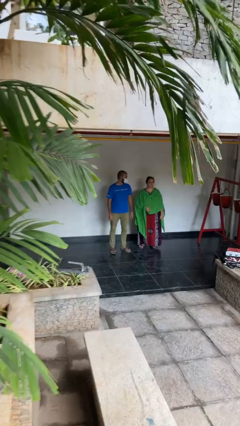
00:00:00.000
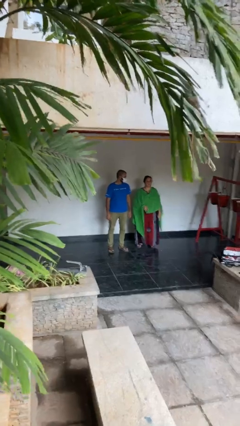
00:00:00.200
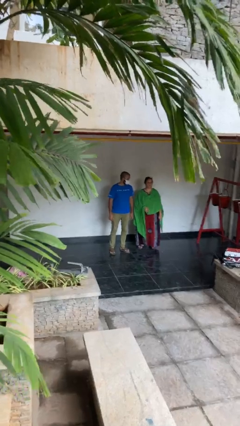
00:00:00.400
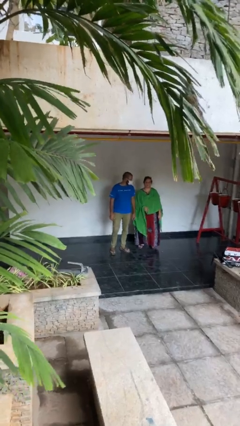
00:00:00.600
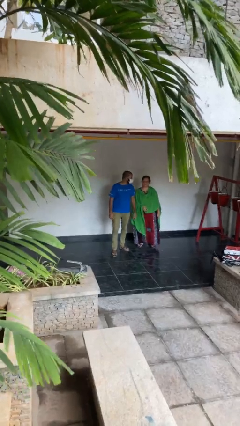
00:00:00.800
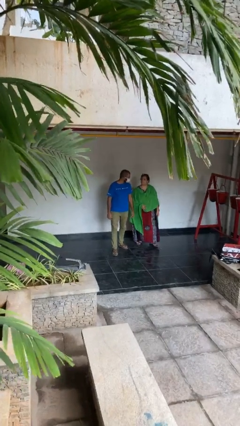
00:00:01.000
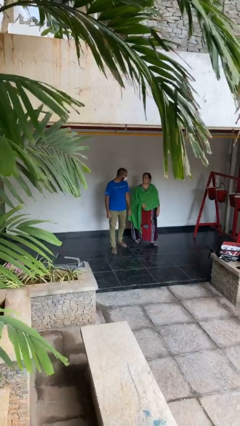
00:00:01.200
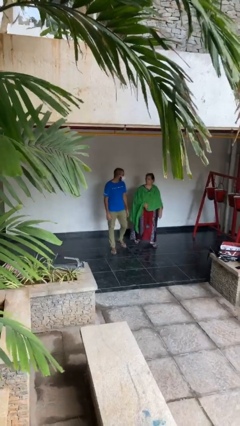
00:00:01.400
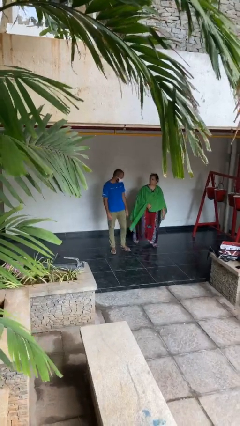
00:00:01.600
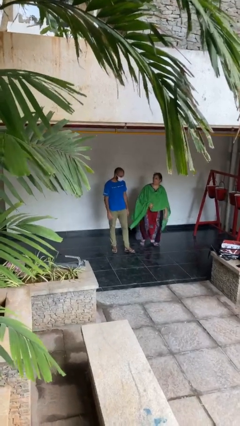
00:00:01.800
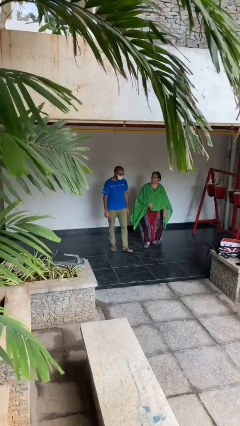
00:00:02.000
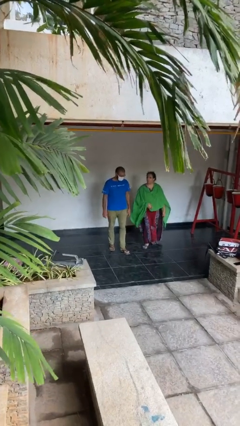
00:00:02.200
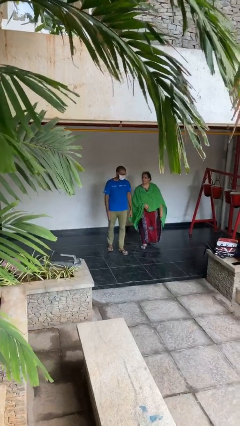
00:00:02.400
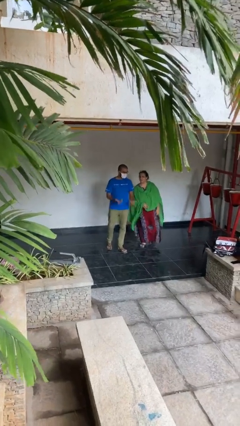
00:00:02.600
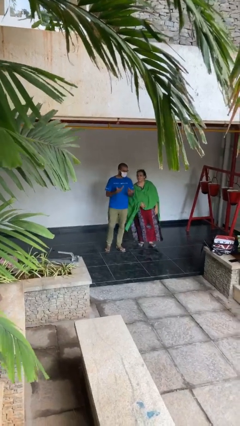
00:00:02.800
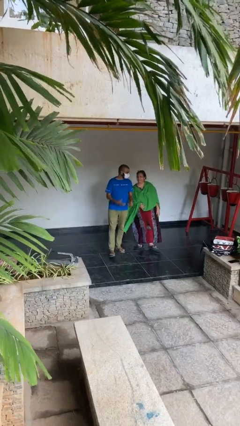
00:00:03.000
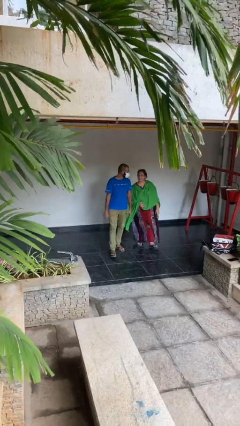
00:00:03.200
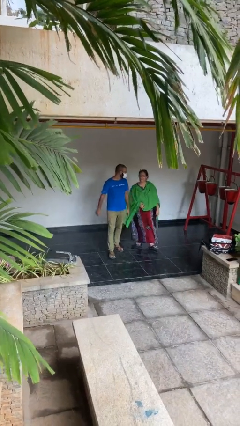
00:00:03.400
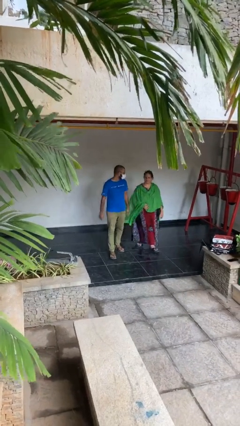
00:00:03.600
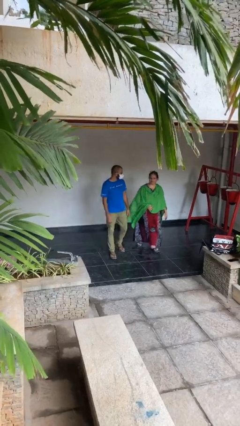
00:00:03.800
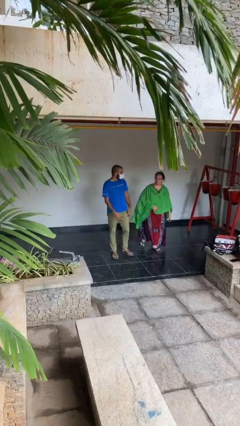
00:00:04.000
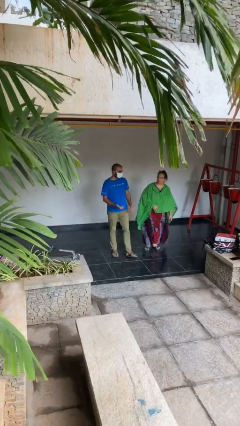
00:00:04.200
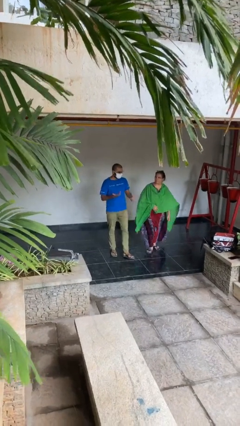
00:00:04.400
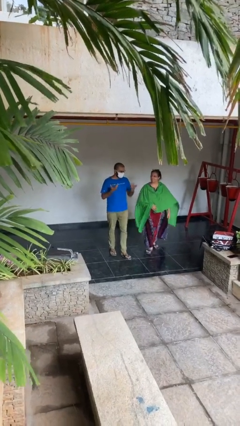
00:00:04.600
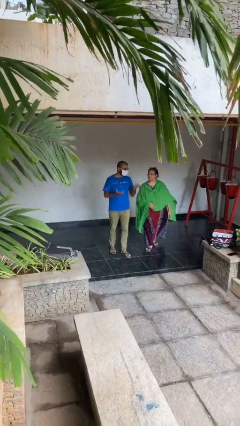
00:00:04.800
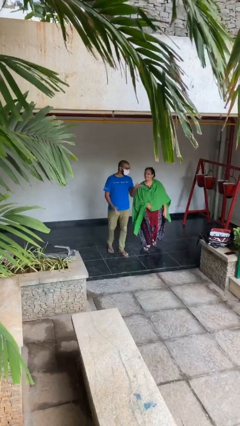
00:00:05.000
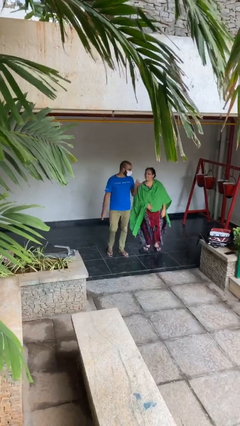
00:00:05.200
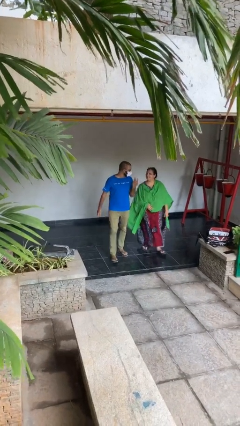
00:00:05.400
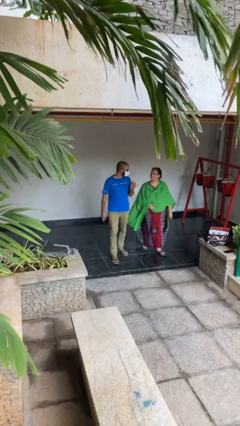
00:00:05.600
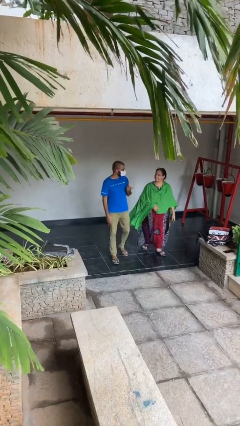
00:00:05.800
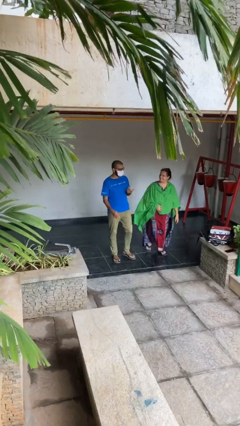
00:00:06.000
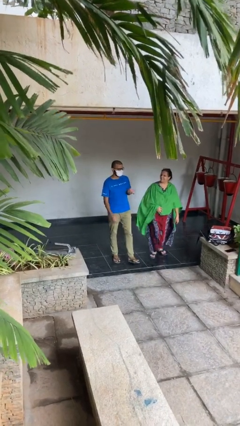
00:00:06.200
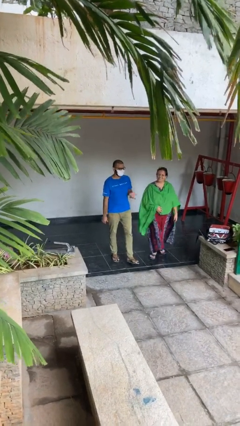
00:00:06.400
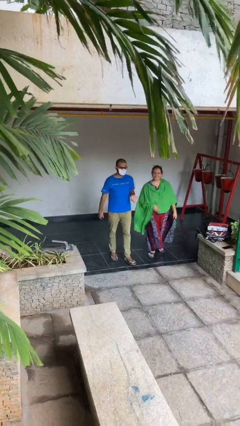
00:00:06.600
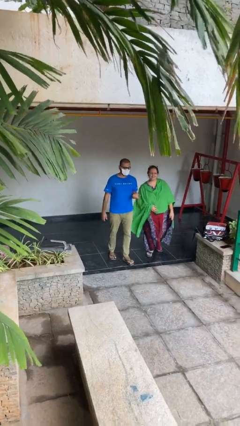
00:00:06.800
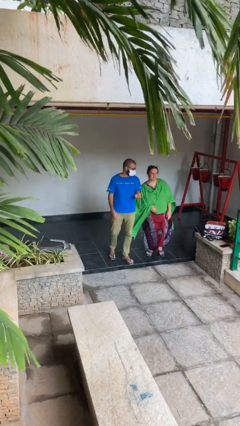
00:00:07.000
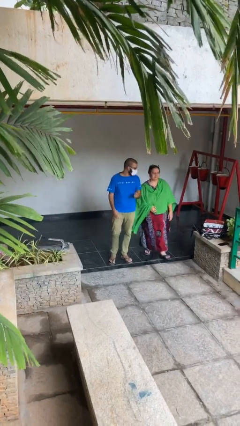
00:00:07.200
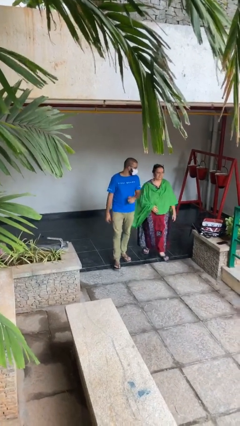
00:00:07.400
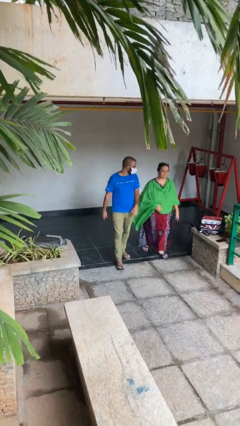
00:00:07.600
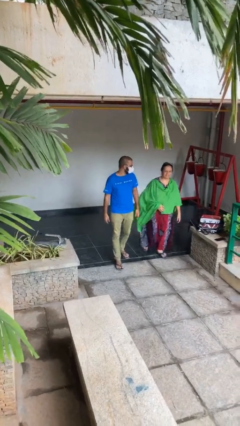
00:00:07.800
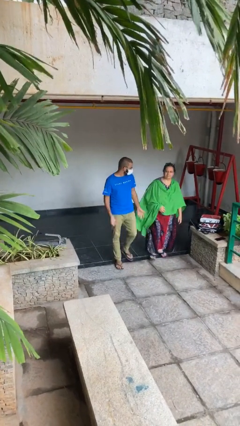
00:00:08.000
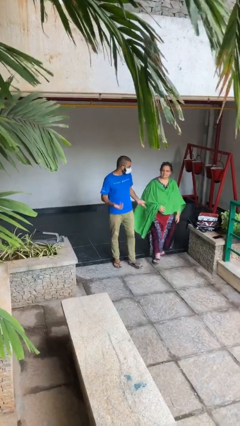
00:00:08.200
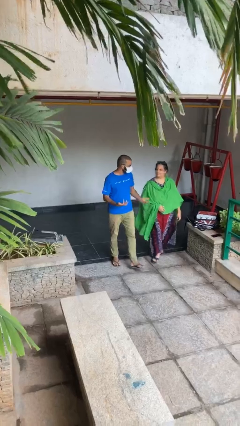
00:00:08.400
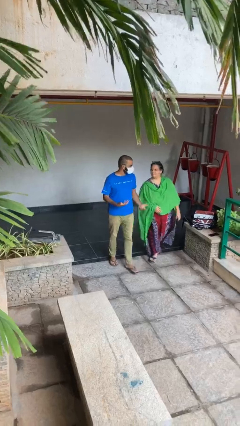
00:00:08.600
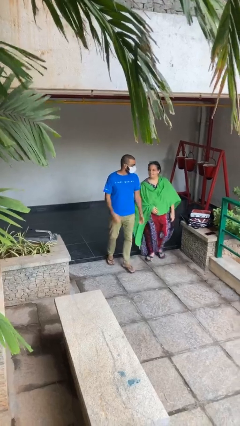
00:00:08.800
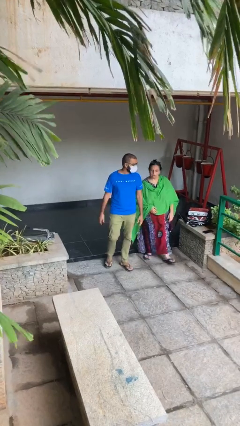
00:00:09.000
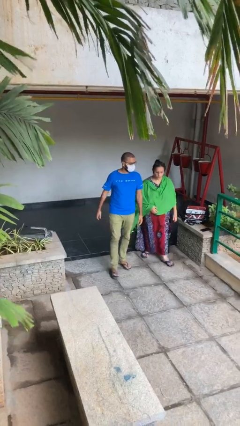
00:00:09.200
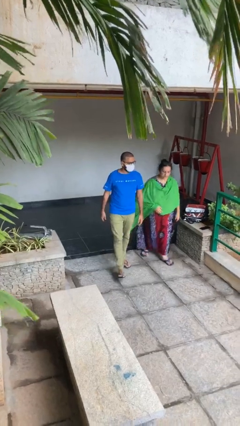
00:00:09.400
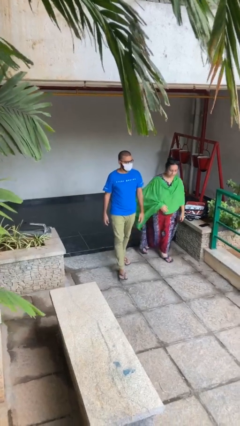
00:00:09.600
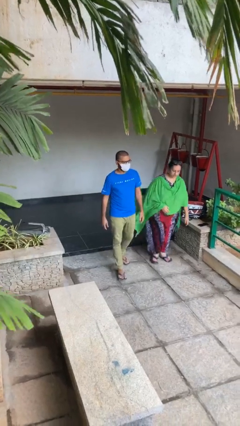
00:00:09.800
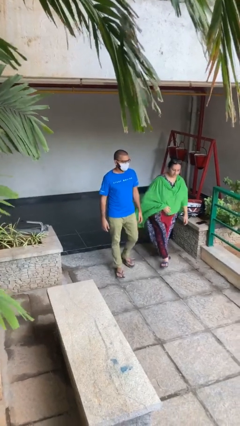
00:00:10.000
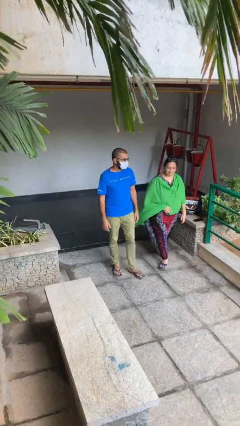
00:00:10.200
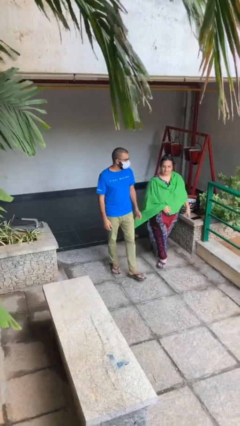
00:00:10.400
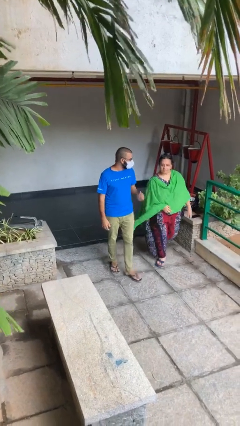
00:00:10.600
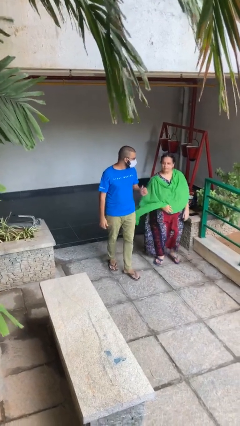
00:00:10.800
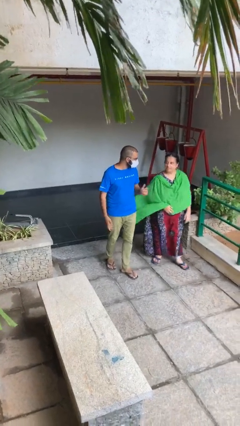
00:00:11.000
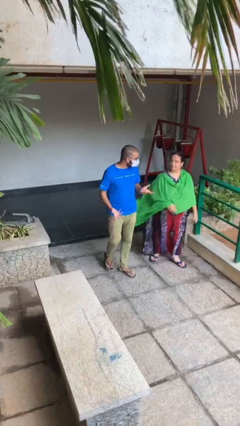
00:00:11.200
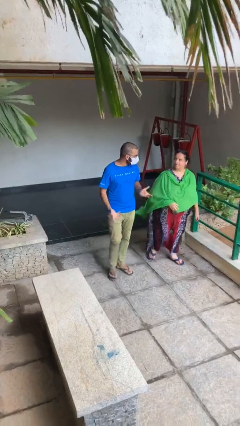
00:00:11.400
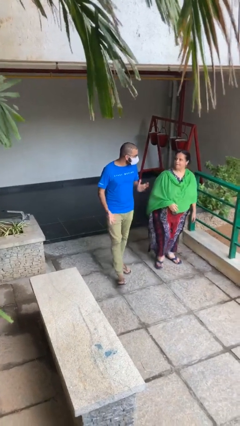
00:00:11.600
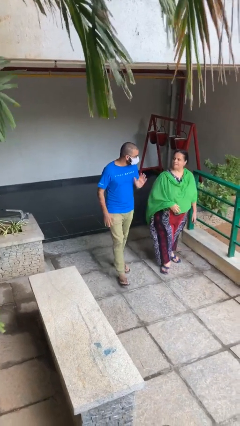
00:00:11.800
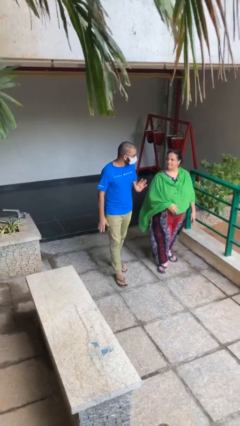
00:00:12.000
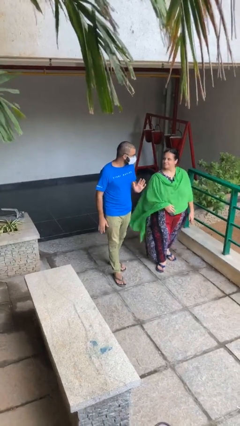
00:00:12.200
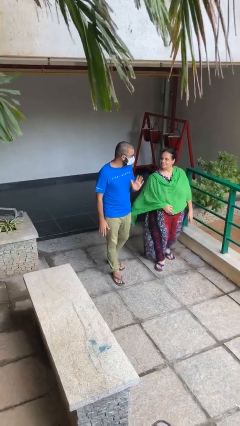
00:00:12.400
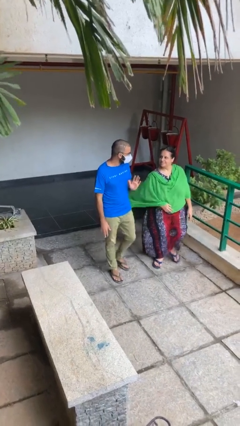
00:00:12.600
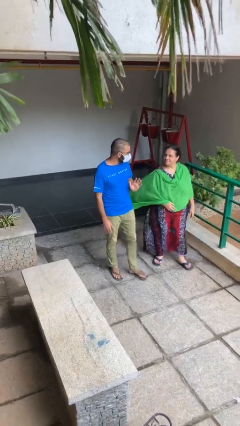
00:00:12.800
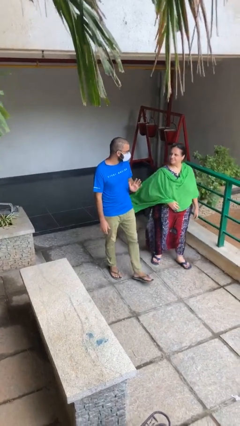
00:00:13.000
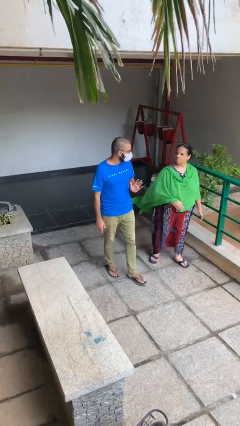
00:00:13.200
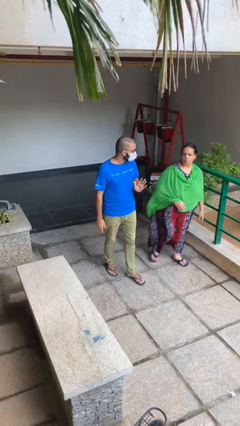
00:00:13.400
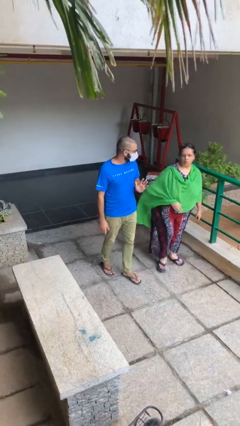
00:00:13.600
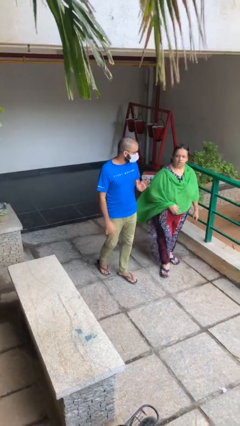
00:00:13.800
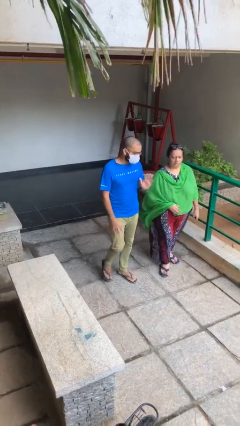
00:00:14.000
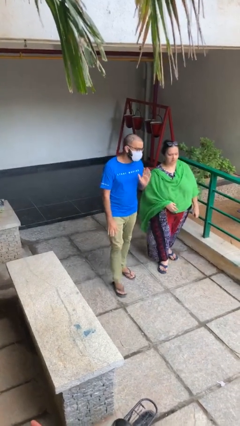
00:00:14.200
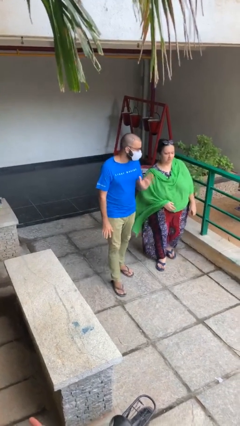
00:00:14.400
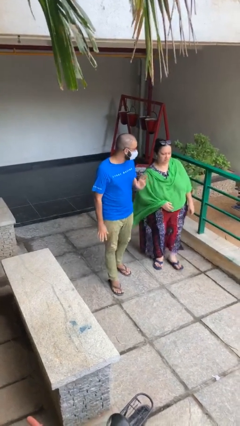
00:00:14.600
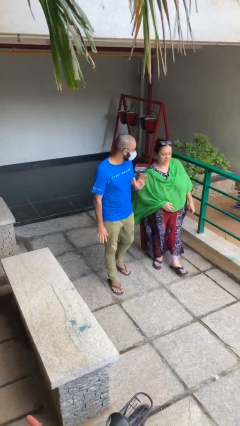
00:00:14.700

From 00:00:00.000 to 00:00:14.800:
person talks to person

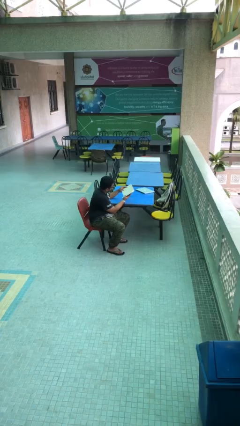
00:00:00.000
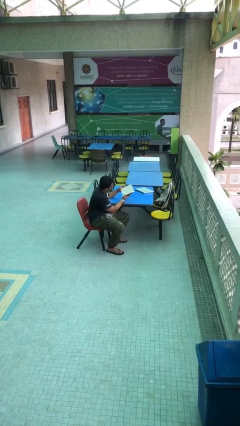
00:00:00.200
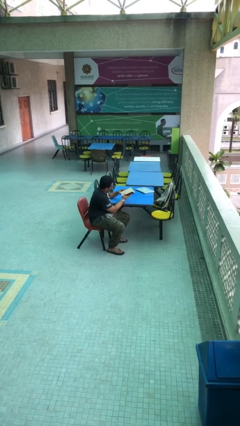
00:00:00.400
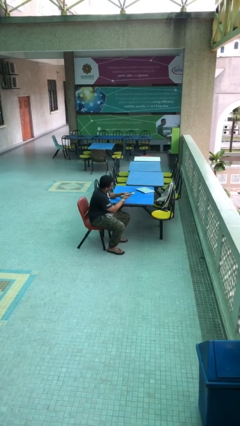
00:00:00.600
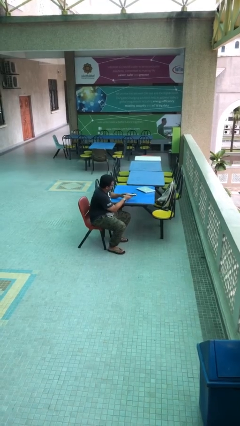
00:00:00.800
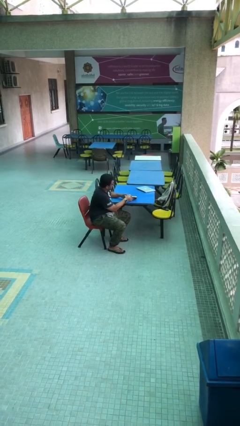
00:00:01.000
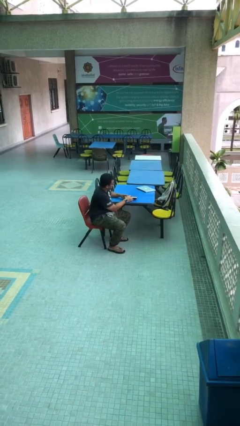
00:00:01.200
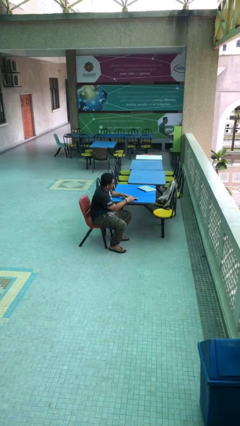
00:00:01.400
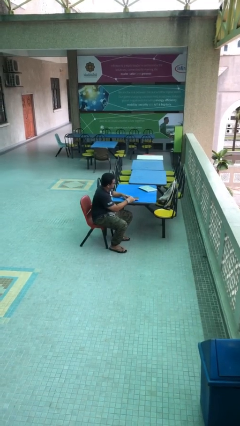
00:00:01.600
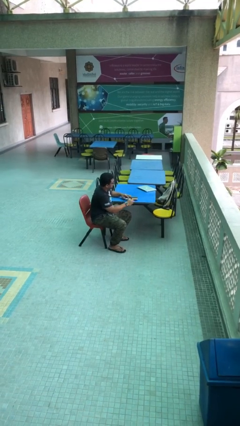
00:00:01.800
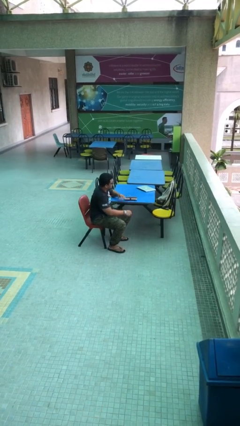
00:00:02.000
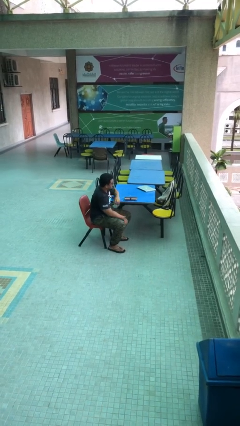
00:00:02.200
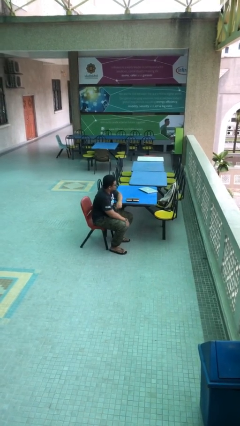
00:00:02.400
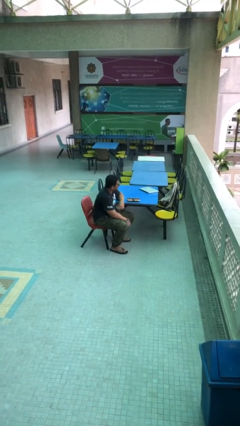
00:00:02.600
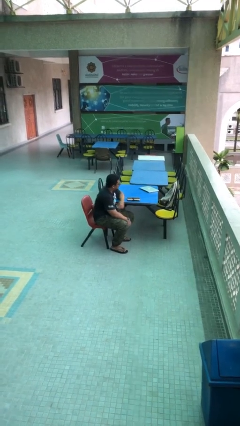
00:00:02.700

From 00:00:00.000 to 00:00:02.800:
person puts down object on table

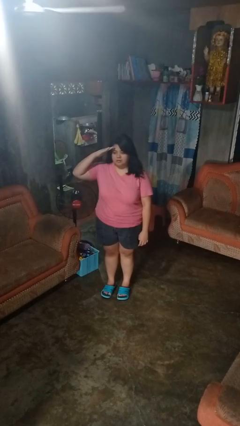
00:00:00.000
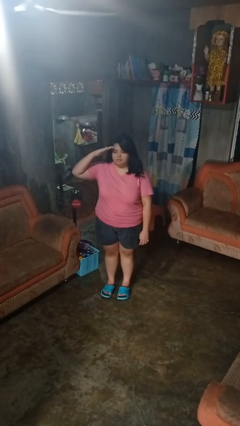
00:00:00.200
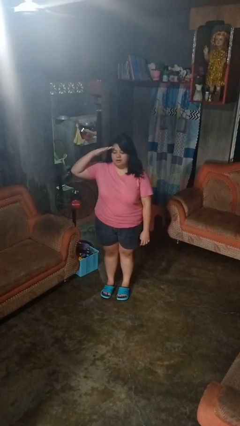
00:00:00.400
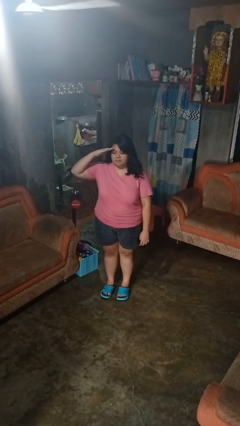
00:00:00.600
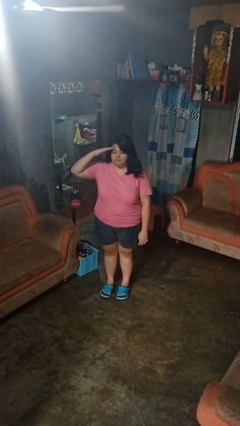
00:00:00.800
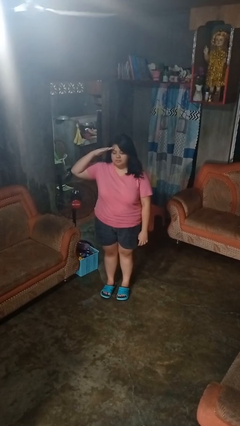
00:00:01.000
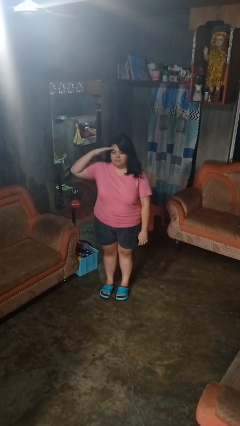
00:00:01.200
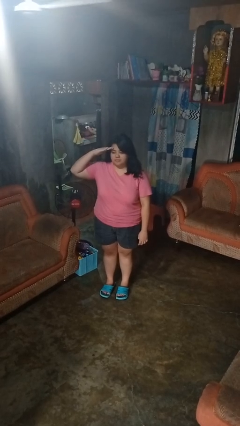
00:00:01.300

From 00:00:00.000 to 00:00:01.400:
person salutes
